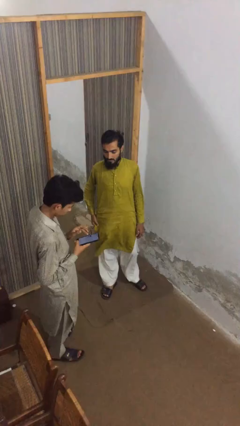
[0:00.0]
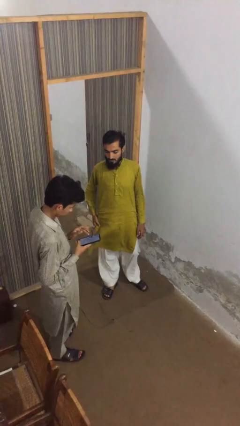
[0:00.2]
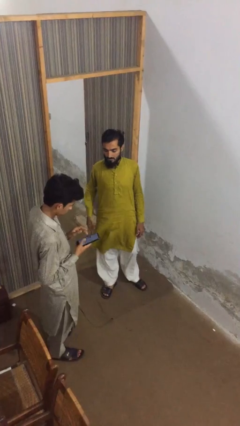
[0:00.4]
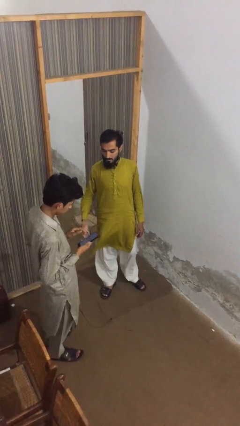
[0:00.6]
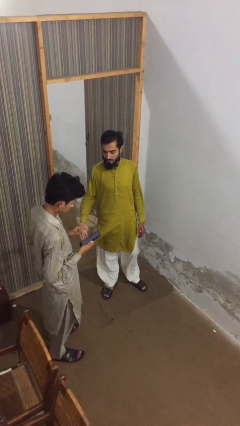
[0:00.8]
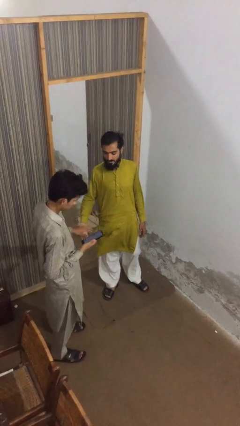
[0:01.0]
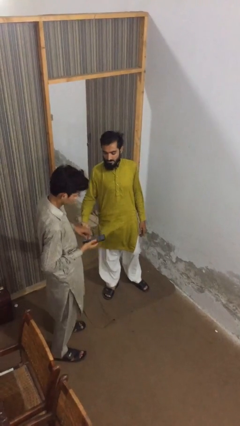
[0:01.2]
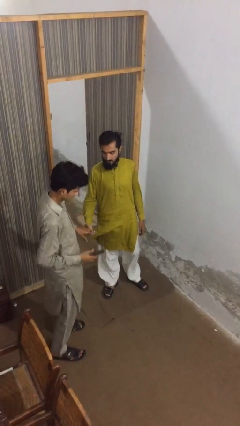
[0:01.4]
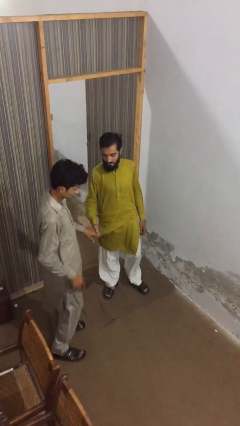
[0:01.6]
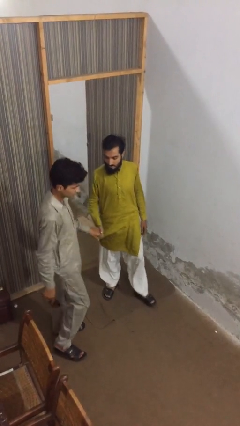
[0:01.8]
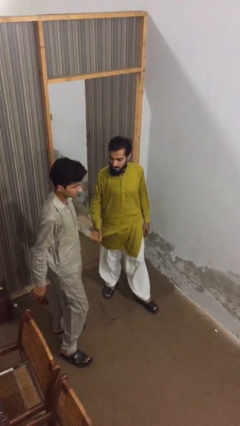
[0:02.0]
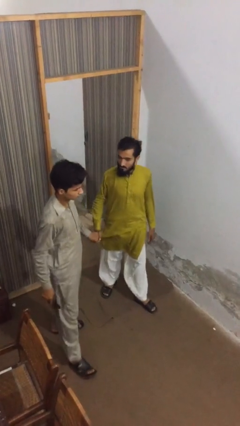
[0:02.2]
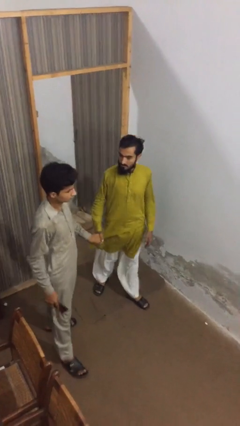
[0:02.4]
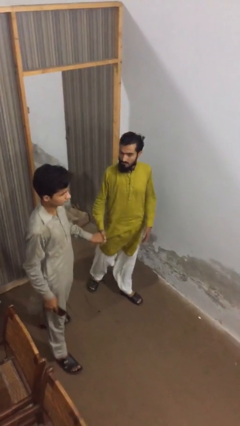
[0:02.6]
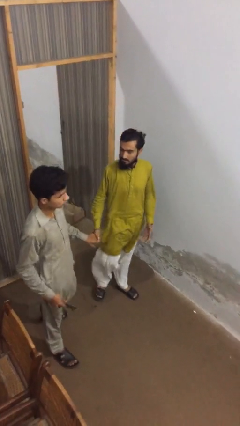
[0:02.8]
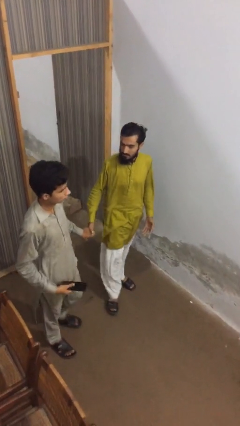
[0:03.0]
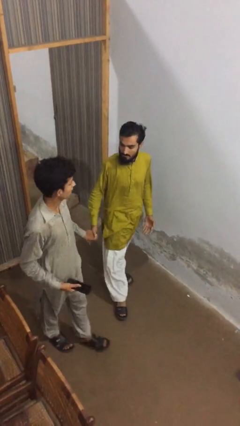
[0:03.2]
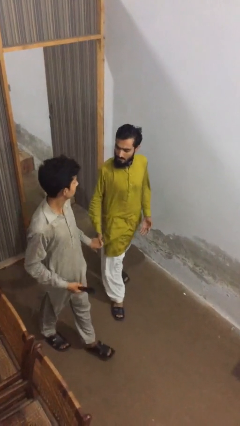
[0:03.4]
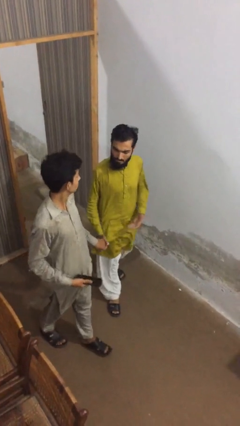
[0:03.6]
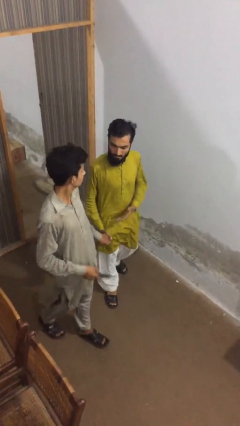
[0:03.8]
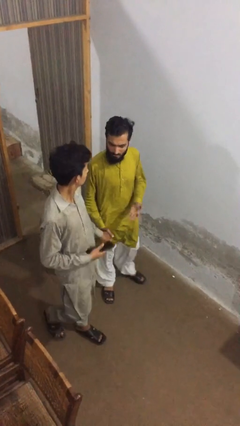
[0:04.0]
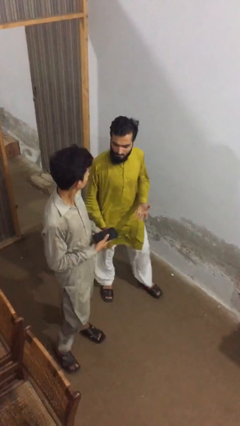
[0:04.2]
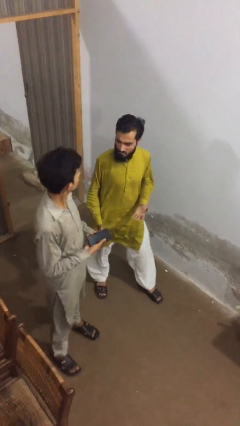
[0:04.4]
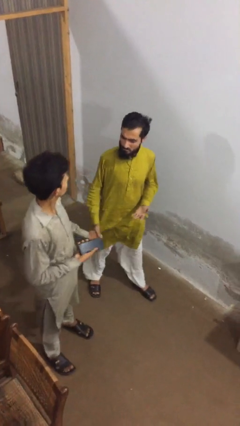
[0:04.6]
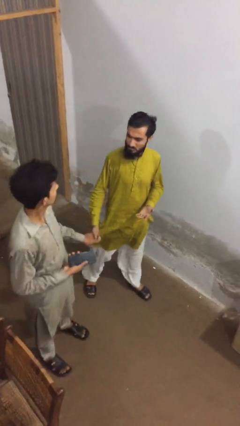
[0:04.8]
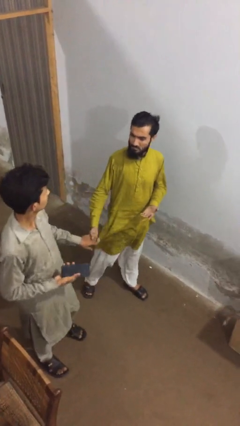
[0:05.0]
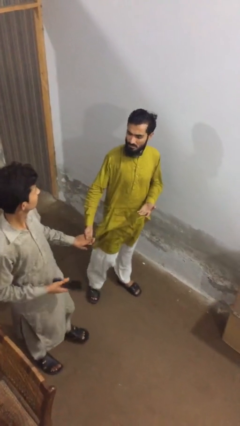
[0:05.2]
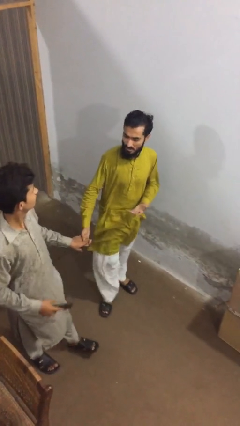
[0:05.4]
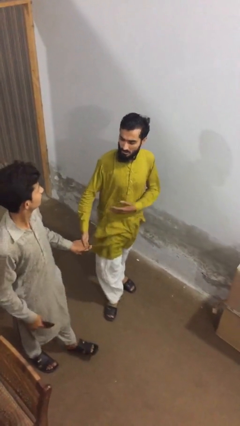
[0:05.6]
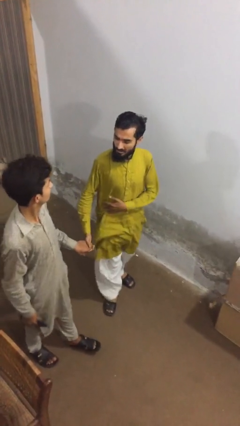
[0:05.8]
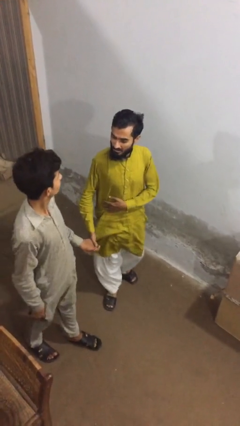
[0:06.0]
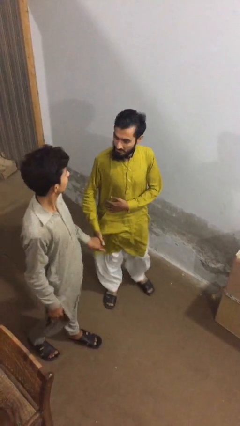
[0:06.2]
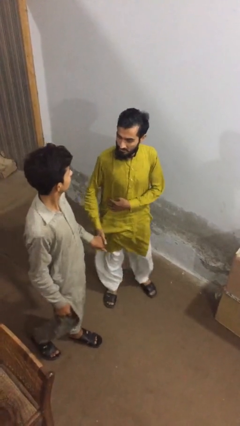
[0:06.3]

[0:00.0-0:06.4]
person holds hand

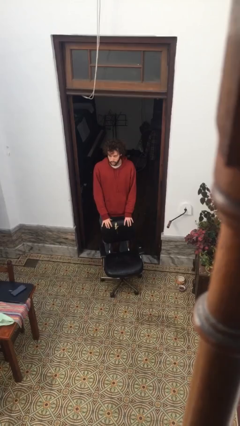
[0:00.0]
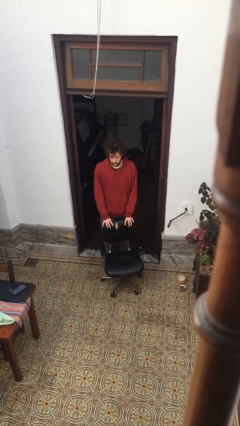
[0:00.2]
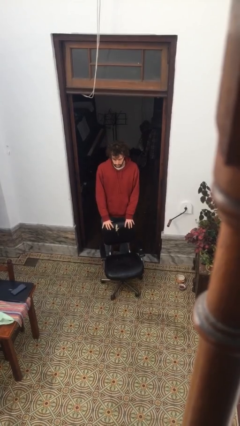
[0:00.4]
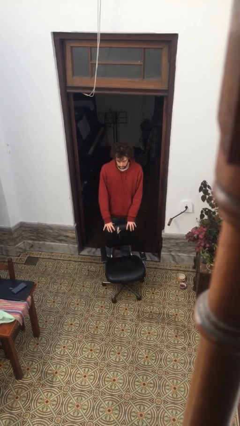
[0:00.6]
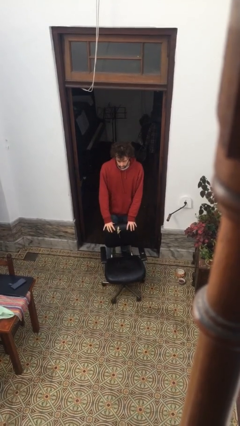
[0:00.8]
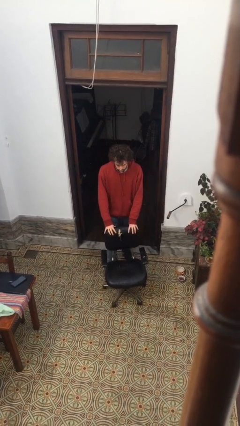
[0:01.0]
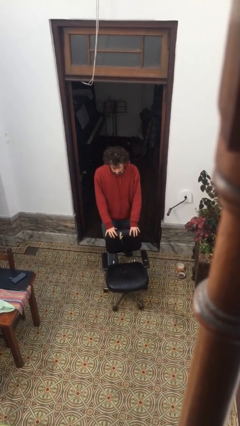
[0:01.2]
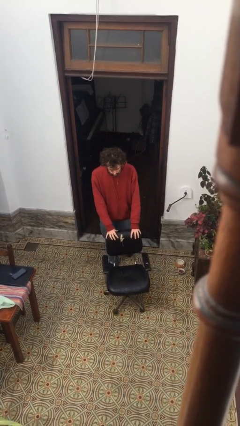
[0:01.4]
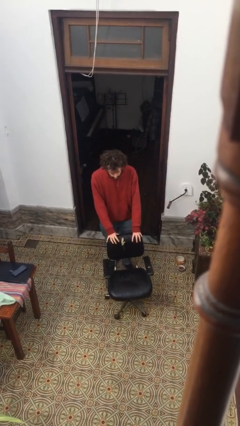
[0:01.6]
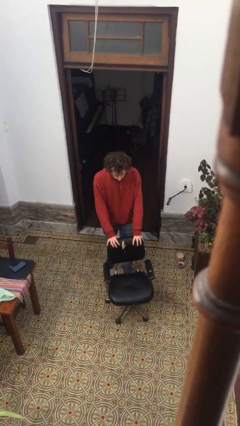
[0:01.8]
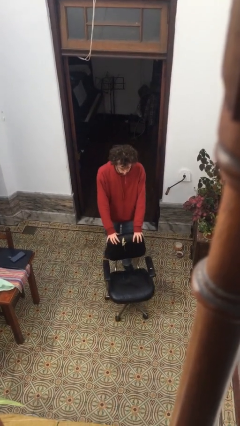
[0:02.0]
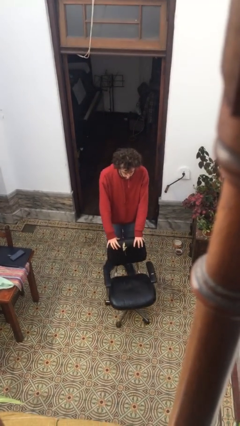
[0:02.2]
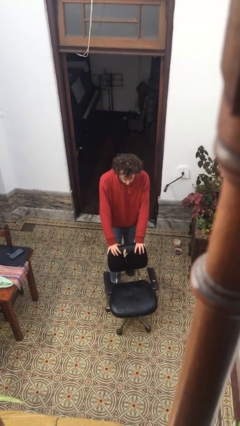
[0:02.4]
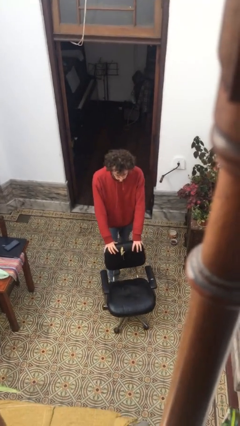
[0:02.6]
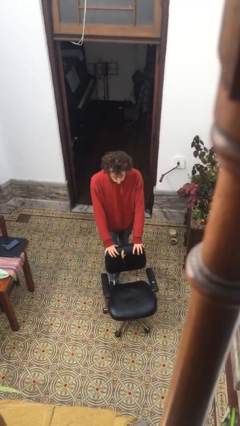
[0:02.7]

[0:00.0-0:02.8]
person pushes wheeled cart

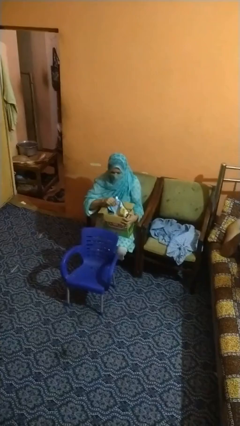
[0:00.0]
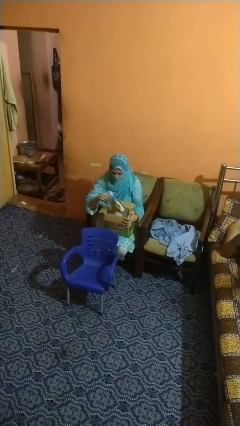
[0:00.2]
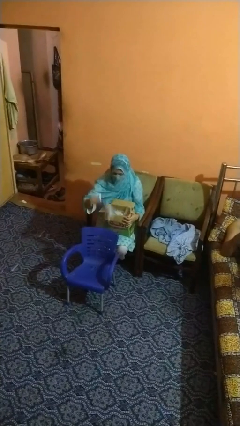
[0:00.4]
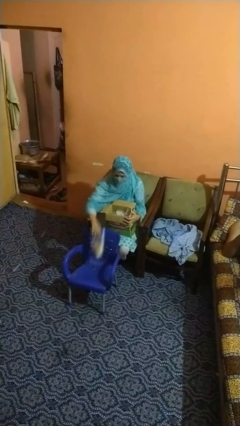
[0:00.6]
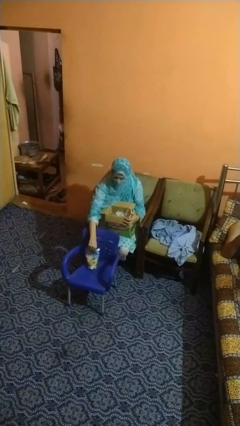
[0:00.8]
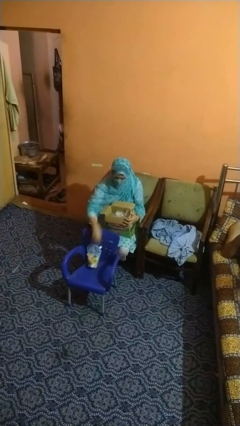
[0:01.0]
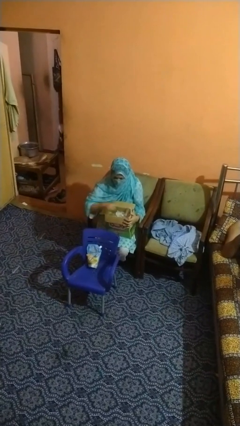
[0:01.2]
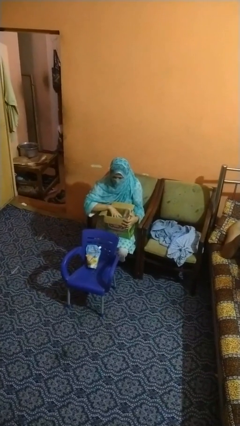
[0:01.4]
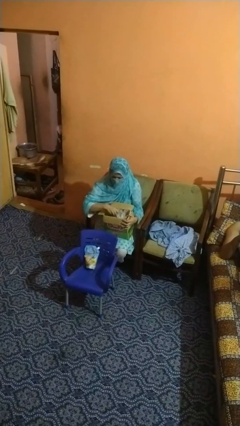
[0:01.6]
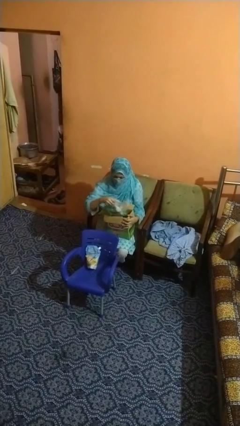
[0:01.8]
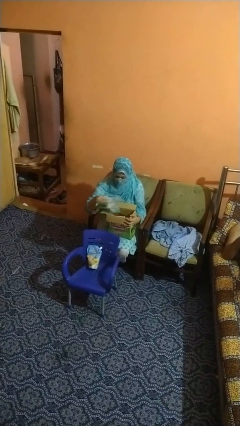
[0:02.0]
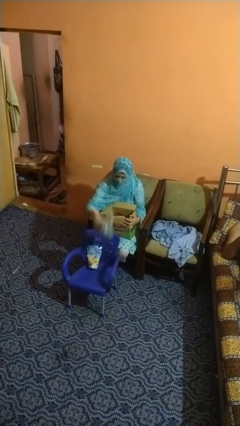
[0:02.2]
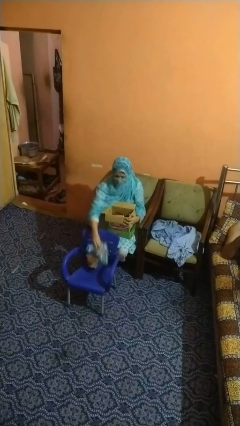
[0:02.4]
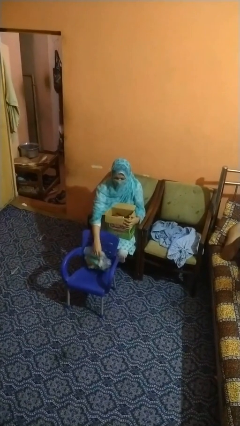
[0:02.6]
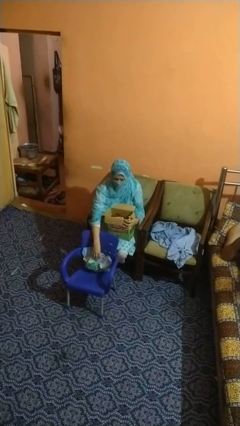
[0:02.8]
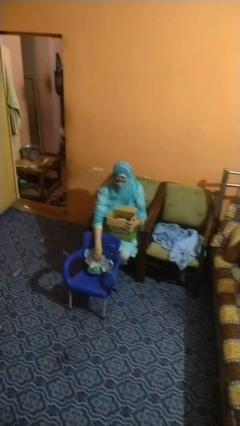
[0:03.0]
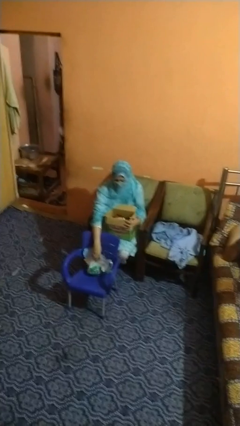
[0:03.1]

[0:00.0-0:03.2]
person takes object from box

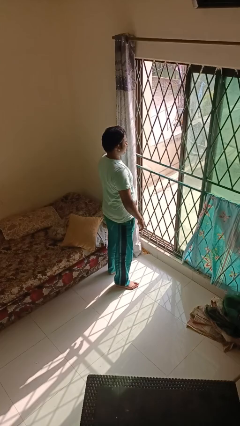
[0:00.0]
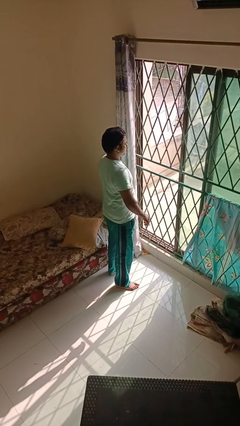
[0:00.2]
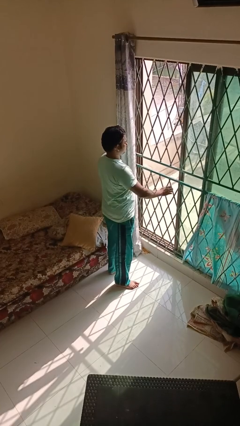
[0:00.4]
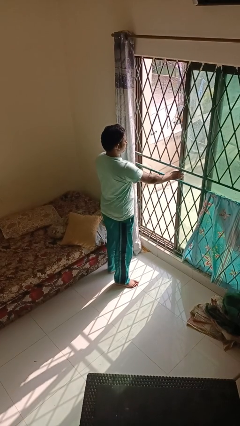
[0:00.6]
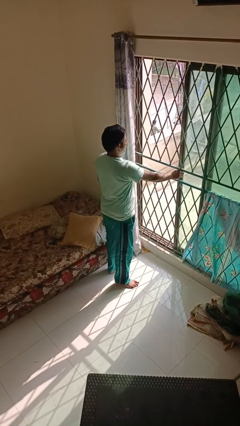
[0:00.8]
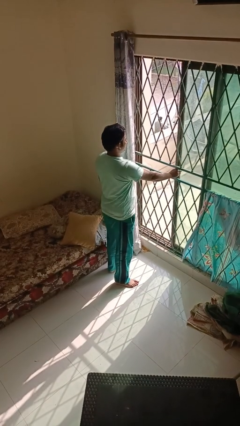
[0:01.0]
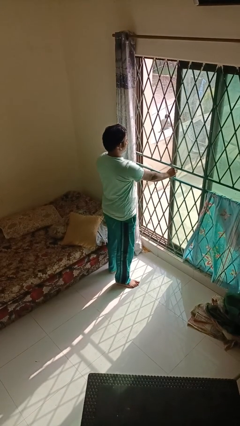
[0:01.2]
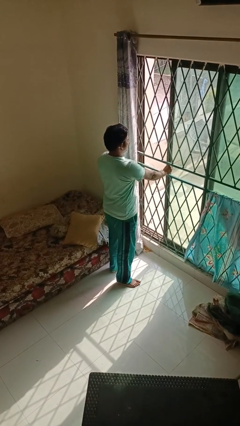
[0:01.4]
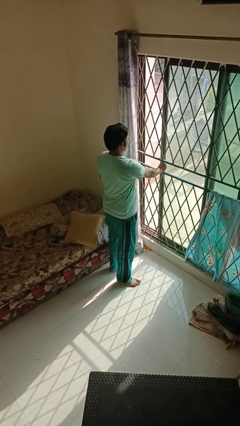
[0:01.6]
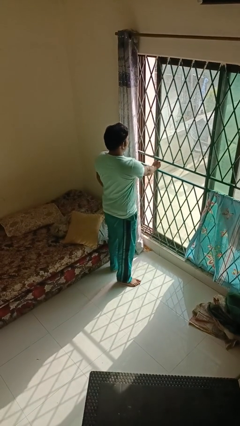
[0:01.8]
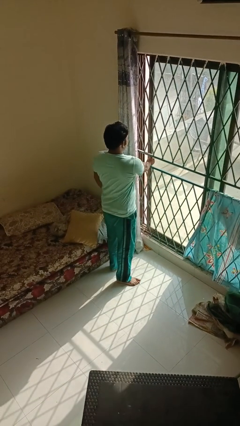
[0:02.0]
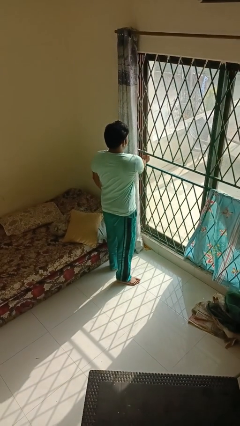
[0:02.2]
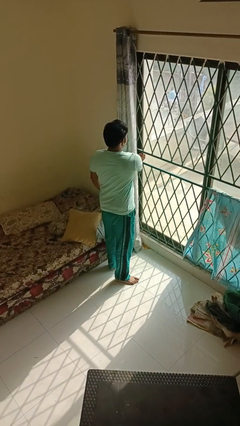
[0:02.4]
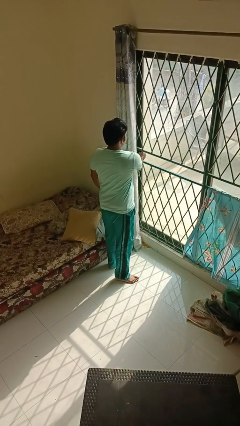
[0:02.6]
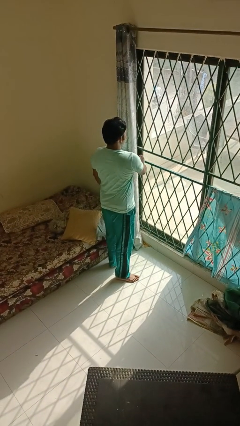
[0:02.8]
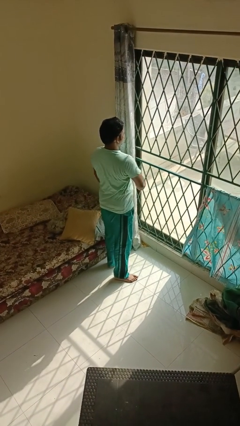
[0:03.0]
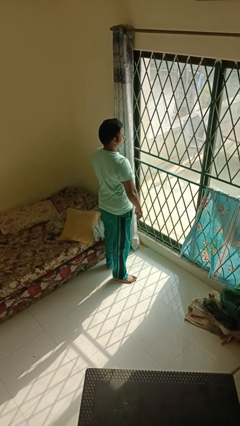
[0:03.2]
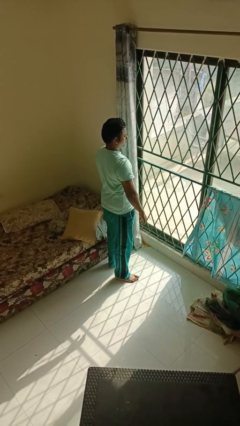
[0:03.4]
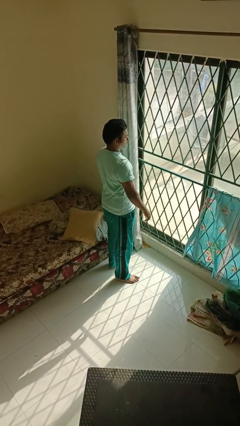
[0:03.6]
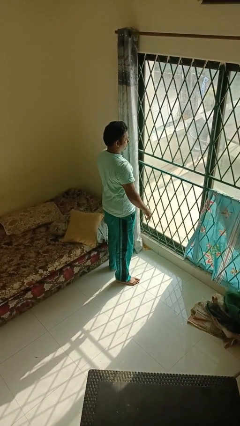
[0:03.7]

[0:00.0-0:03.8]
person closes home window

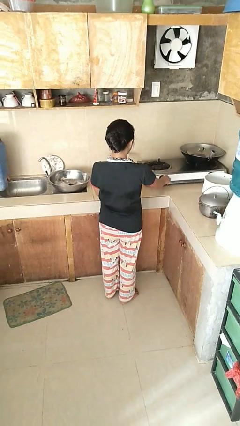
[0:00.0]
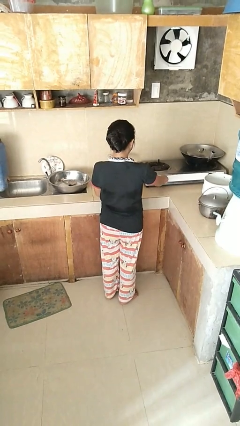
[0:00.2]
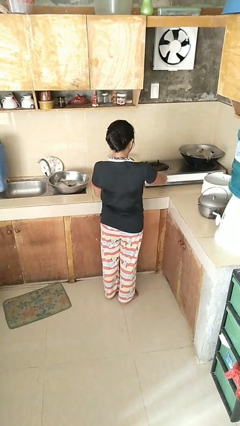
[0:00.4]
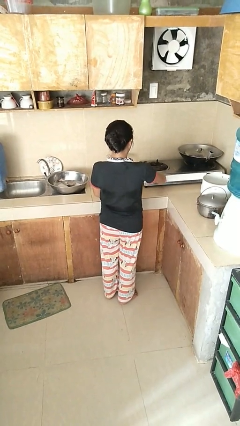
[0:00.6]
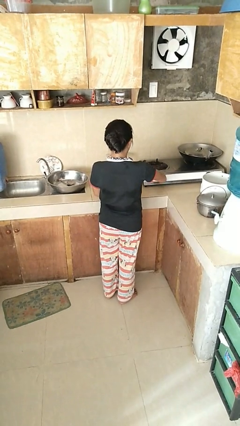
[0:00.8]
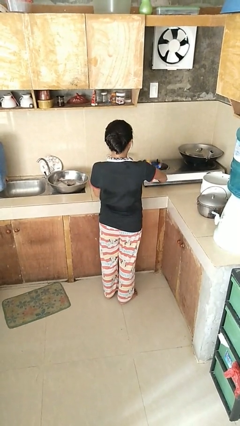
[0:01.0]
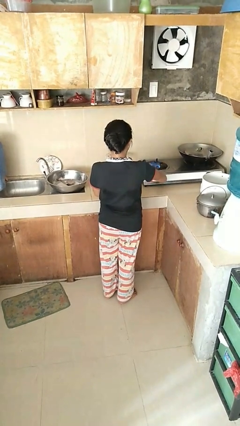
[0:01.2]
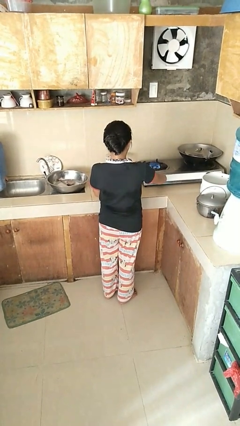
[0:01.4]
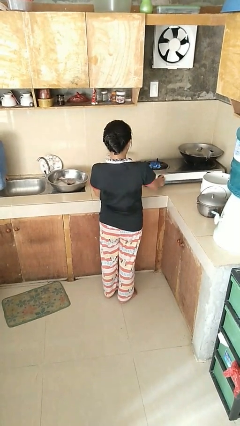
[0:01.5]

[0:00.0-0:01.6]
person turns on stovetop

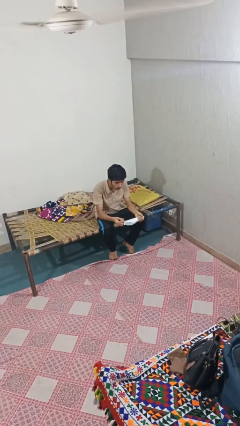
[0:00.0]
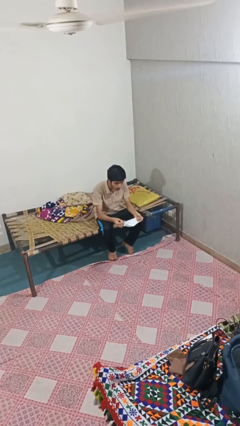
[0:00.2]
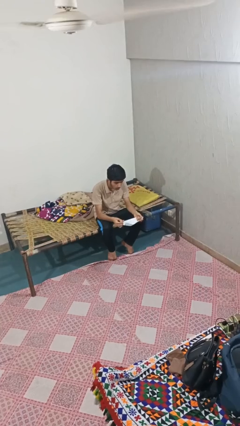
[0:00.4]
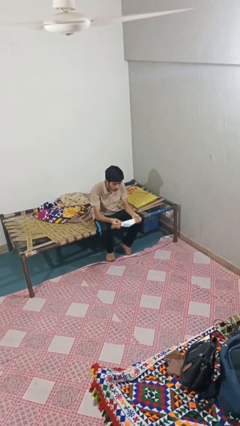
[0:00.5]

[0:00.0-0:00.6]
person takes off facemask
